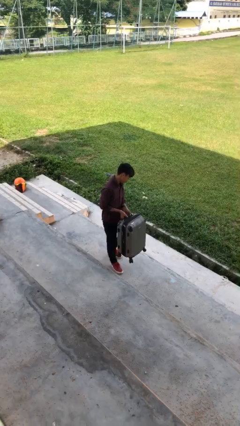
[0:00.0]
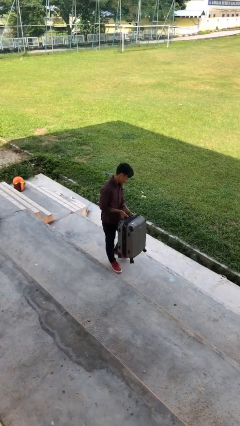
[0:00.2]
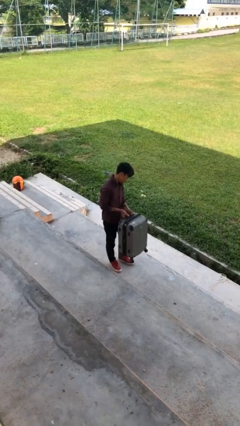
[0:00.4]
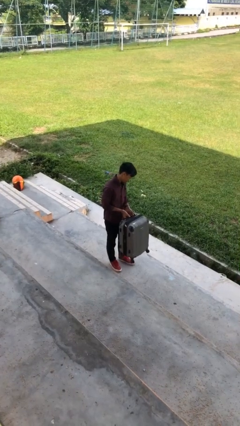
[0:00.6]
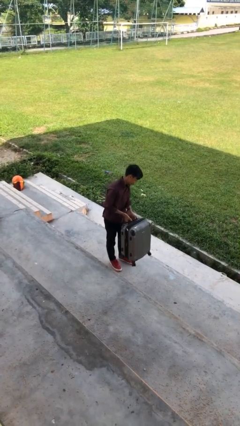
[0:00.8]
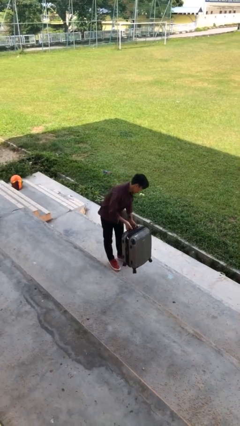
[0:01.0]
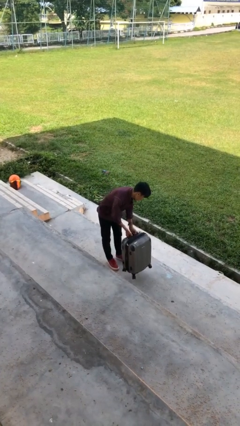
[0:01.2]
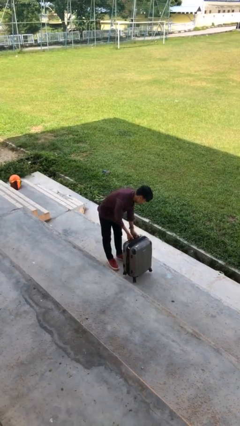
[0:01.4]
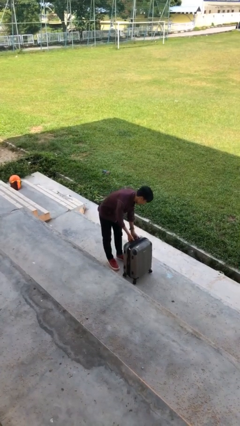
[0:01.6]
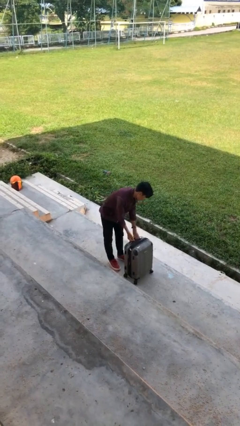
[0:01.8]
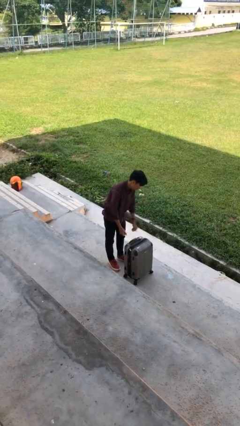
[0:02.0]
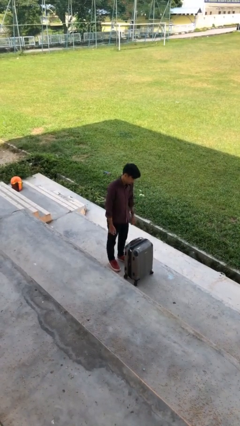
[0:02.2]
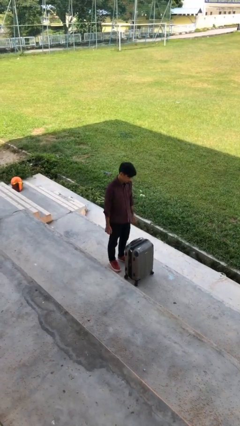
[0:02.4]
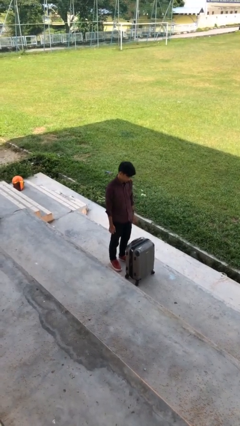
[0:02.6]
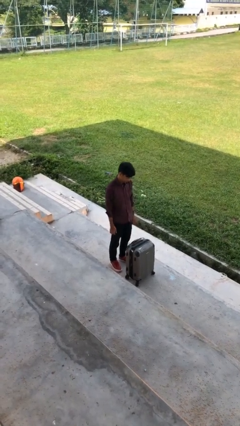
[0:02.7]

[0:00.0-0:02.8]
person puts down object on floor

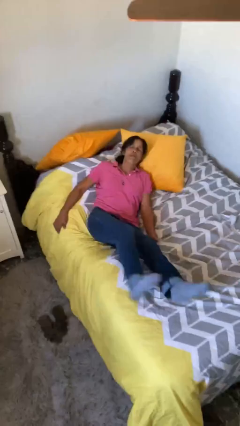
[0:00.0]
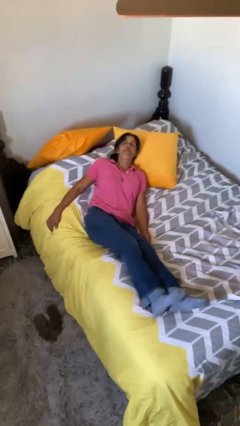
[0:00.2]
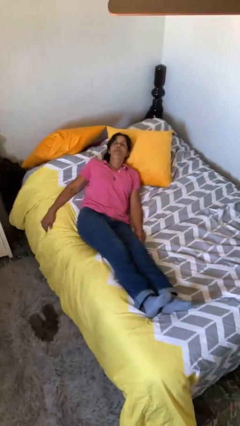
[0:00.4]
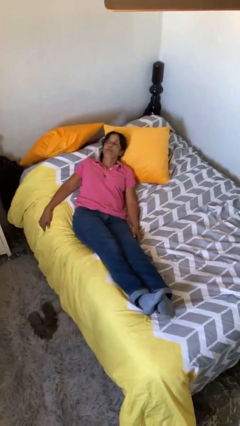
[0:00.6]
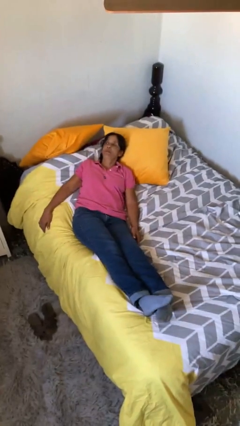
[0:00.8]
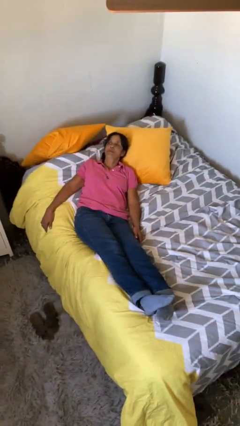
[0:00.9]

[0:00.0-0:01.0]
person lies down on bed

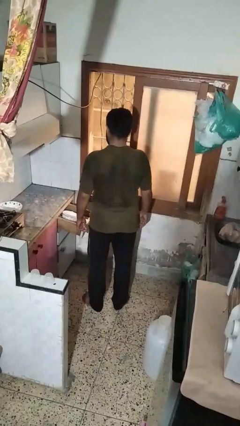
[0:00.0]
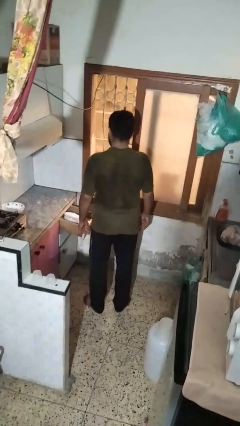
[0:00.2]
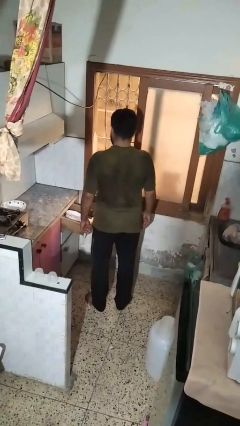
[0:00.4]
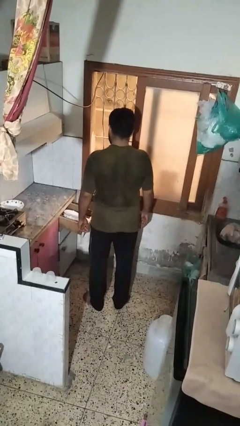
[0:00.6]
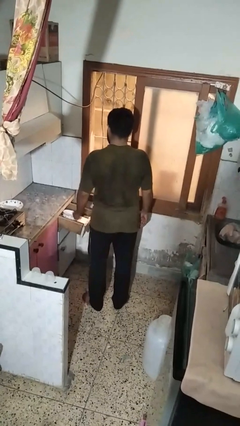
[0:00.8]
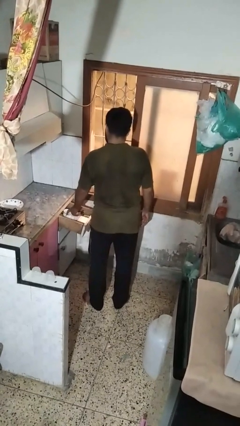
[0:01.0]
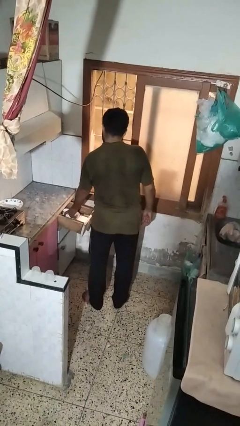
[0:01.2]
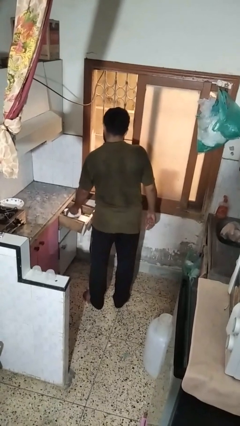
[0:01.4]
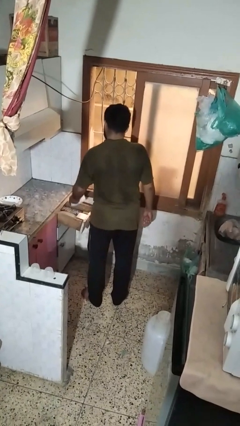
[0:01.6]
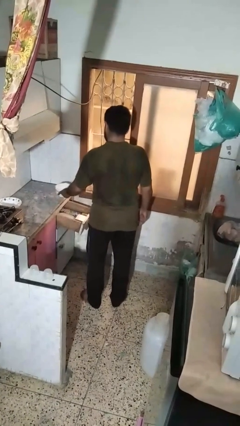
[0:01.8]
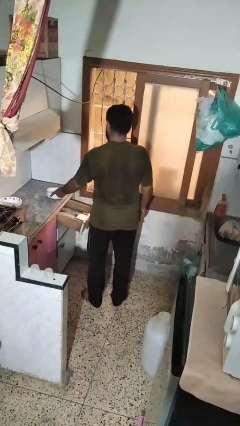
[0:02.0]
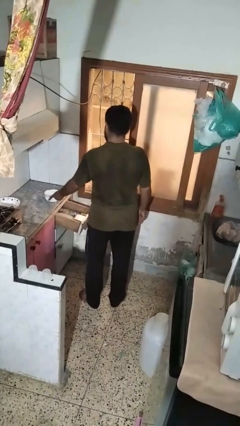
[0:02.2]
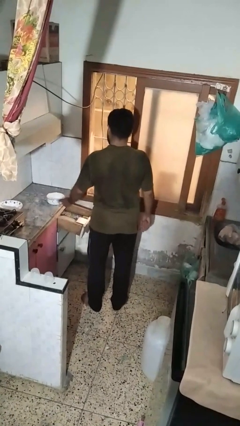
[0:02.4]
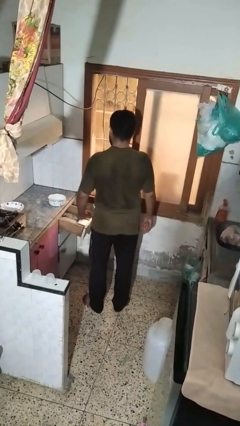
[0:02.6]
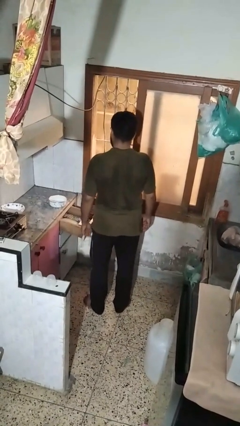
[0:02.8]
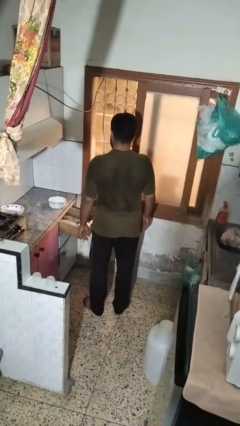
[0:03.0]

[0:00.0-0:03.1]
person takes object from kitchen drawer

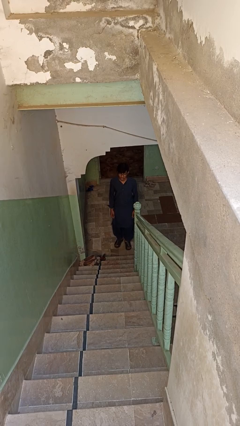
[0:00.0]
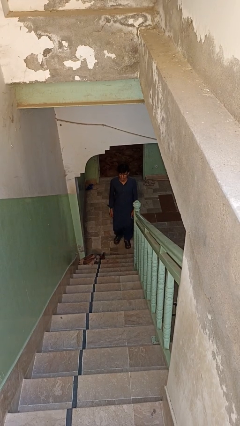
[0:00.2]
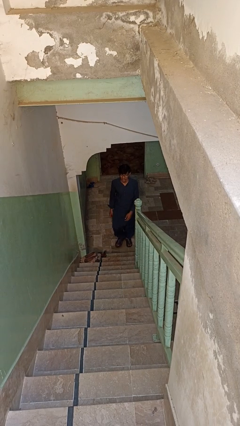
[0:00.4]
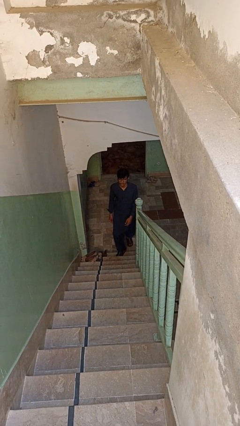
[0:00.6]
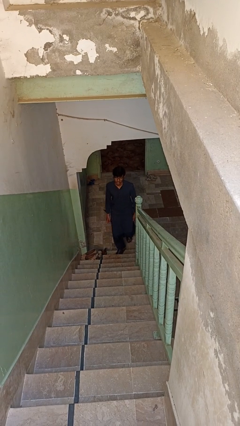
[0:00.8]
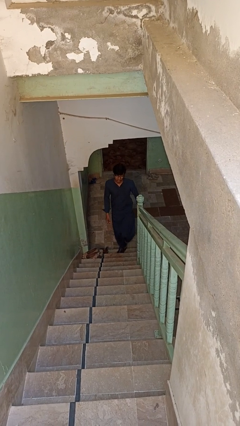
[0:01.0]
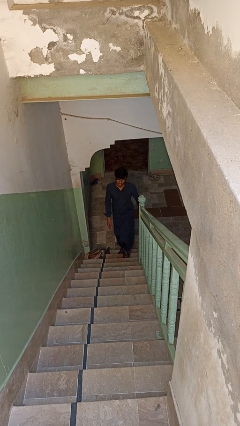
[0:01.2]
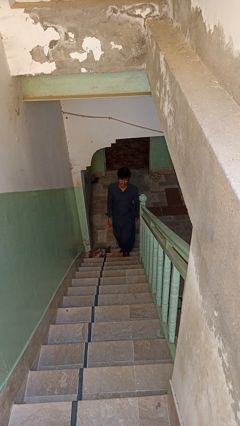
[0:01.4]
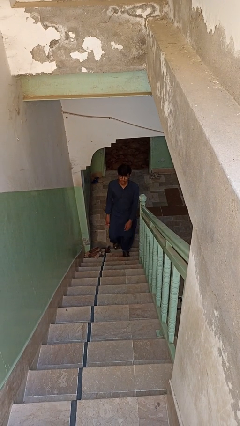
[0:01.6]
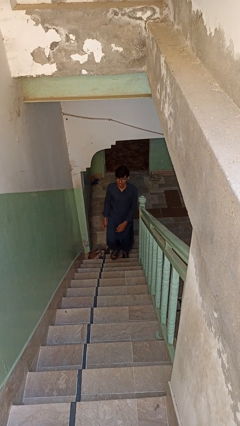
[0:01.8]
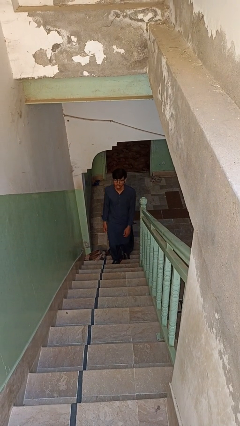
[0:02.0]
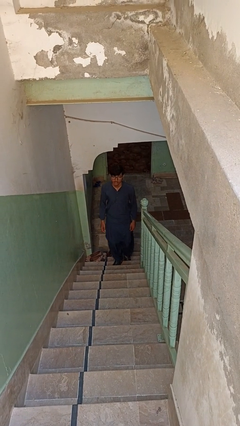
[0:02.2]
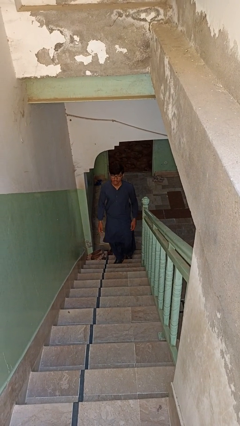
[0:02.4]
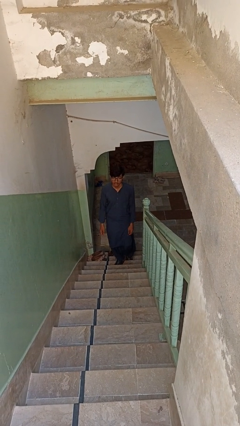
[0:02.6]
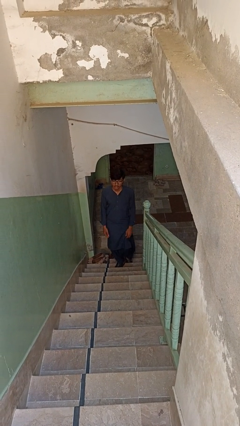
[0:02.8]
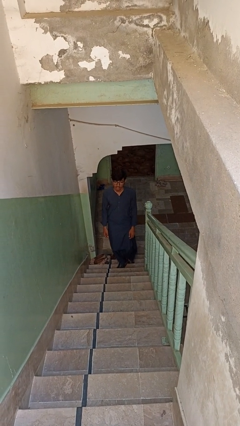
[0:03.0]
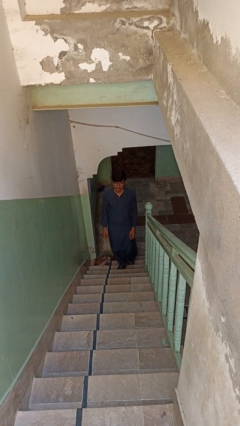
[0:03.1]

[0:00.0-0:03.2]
person climbs up stairs

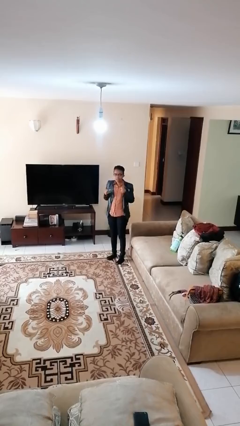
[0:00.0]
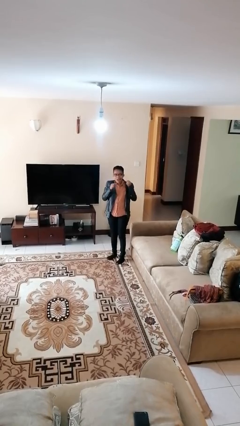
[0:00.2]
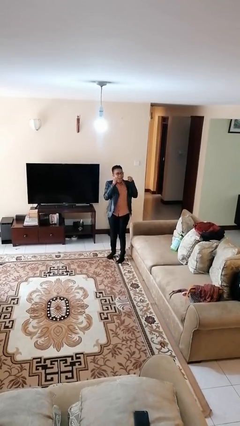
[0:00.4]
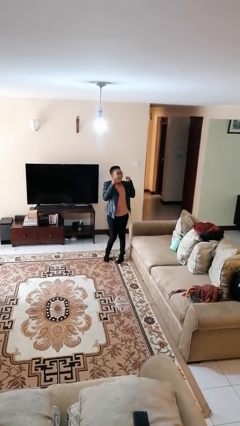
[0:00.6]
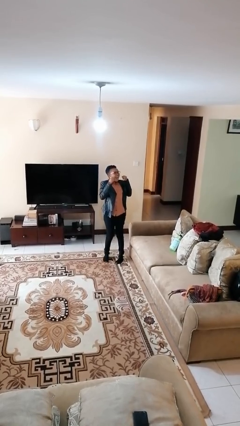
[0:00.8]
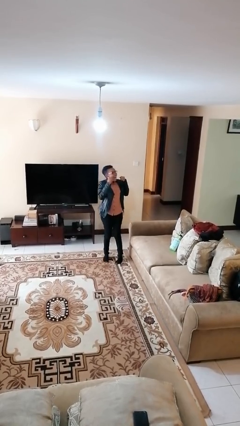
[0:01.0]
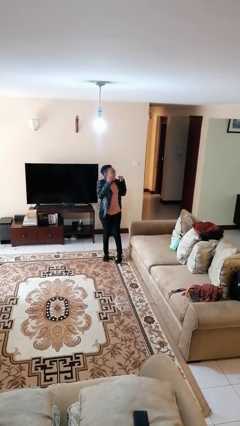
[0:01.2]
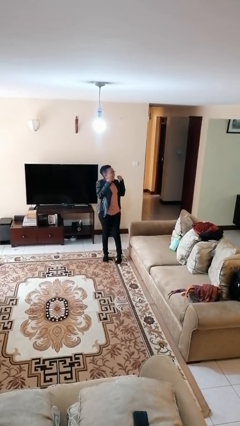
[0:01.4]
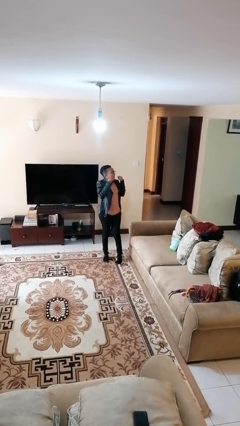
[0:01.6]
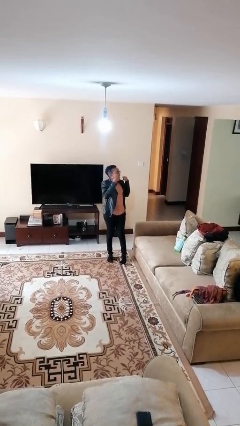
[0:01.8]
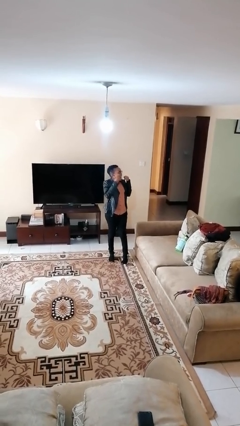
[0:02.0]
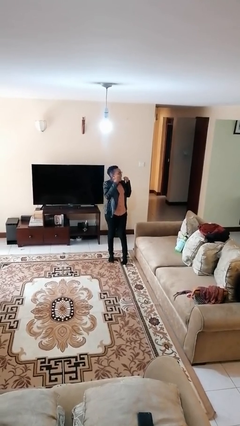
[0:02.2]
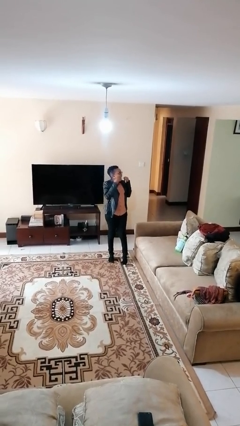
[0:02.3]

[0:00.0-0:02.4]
person flosses

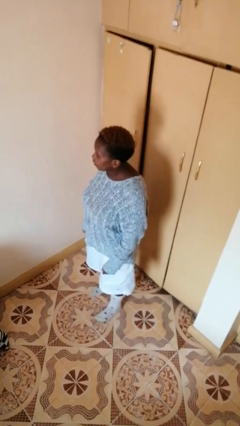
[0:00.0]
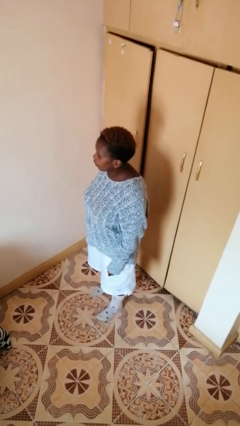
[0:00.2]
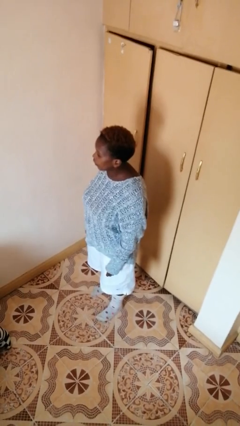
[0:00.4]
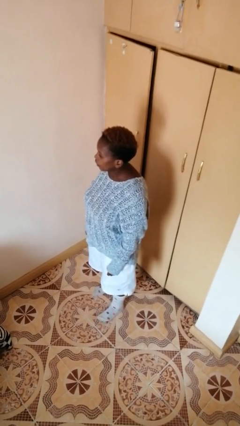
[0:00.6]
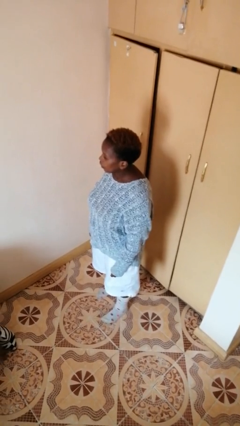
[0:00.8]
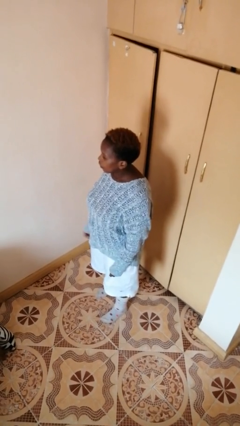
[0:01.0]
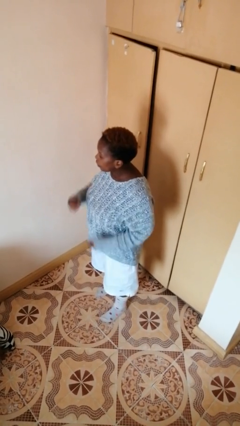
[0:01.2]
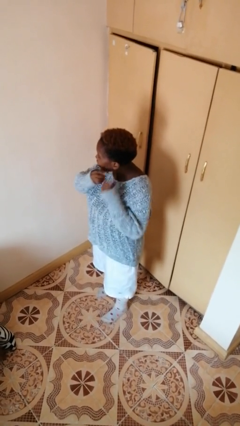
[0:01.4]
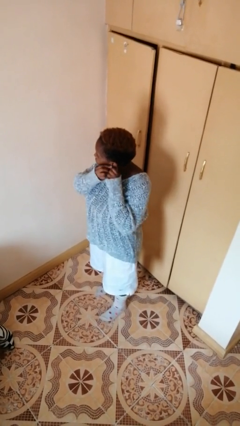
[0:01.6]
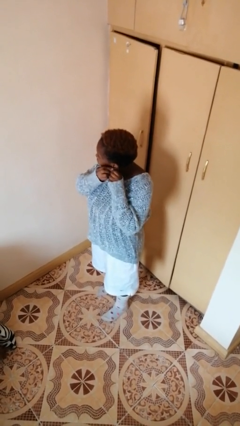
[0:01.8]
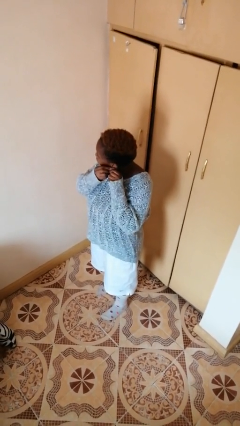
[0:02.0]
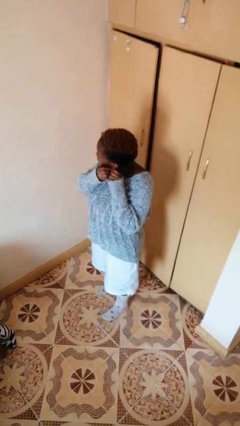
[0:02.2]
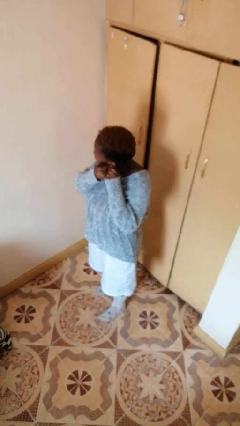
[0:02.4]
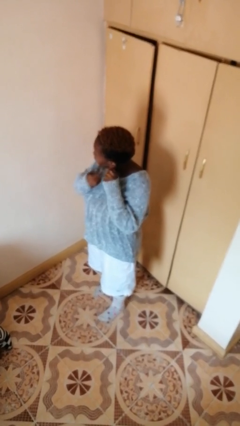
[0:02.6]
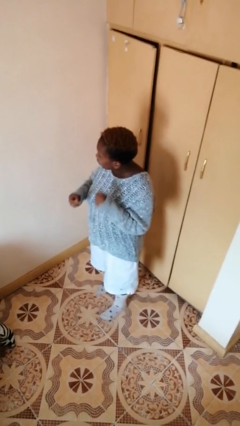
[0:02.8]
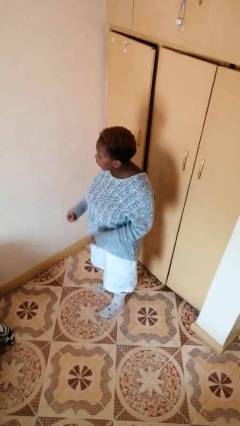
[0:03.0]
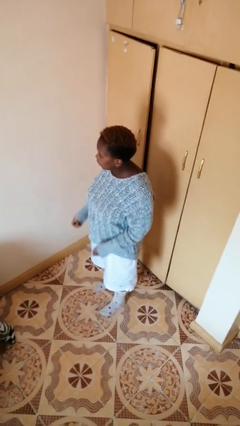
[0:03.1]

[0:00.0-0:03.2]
person takes off earrings

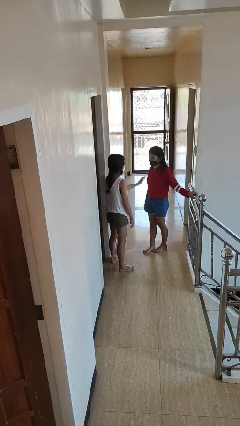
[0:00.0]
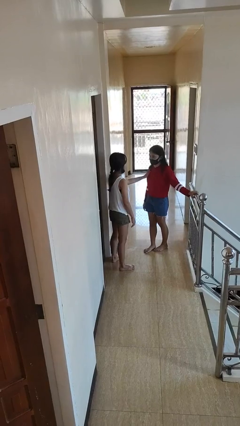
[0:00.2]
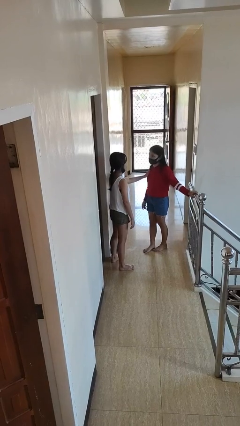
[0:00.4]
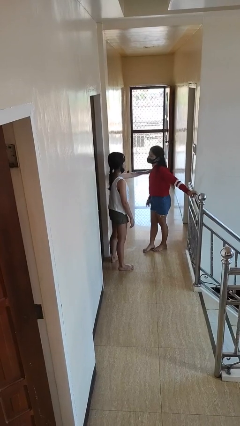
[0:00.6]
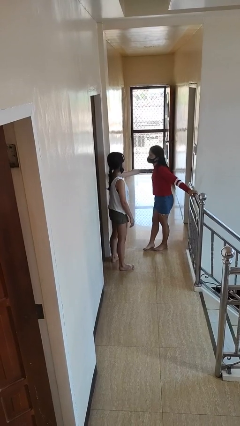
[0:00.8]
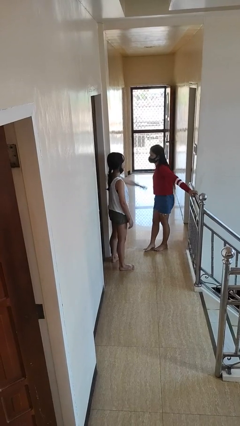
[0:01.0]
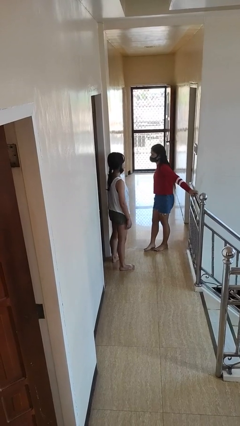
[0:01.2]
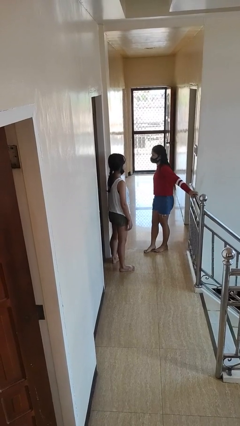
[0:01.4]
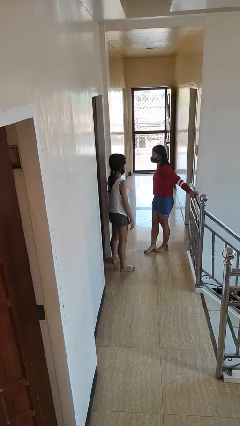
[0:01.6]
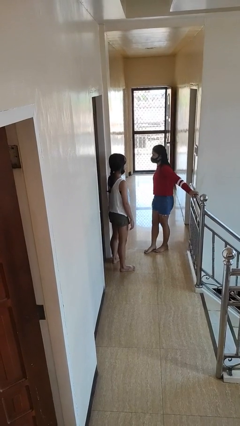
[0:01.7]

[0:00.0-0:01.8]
person shoves person
